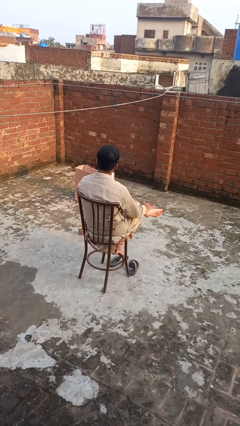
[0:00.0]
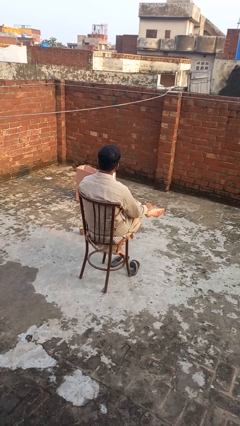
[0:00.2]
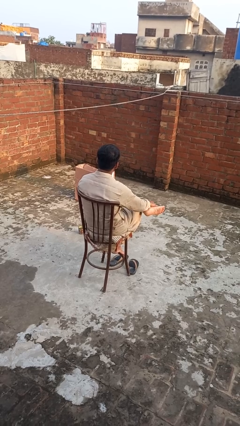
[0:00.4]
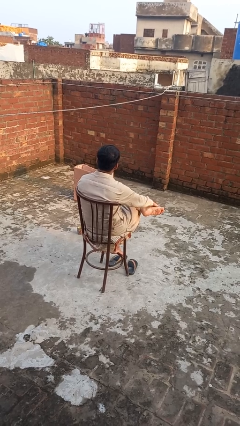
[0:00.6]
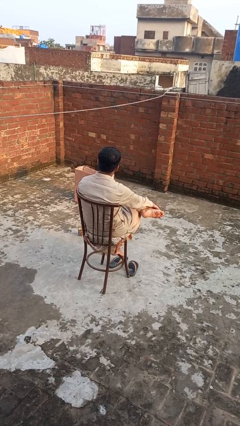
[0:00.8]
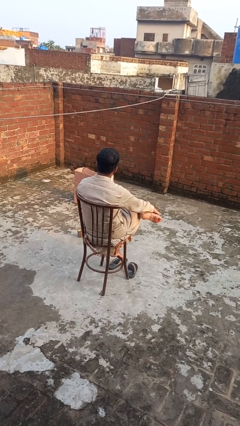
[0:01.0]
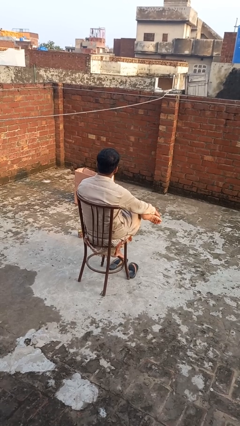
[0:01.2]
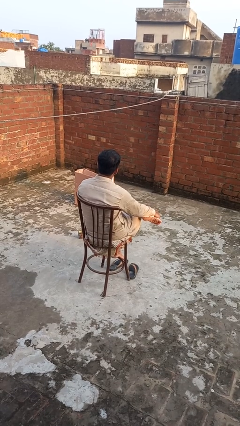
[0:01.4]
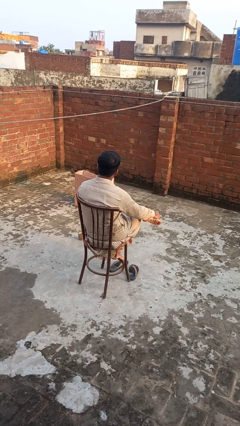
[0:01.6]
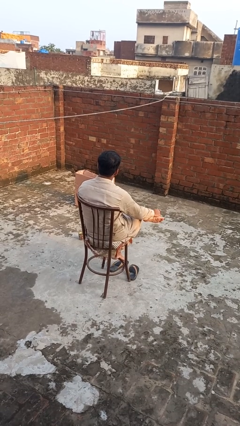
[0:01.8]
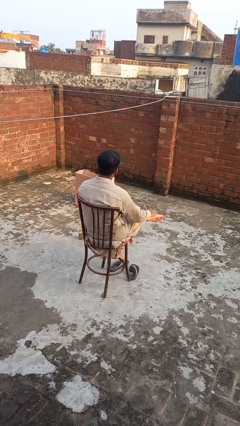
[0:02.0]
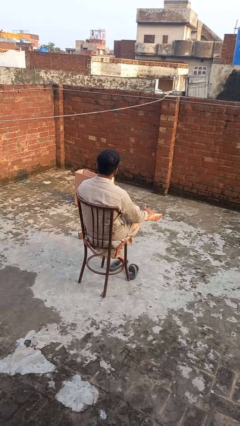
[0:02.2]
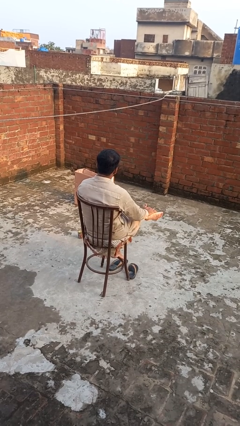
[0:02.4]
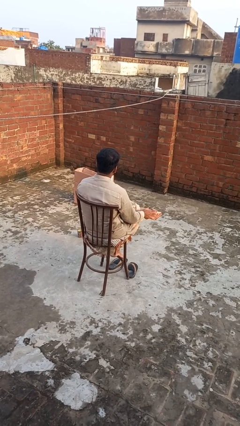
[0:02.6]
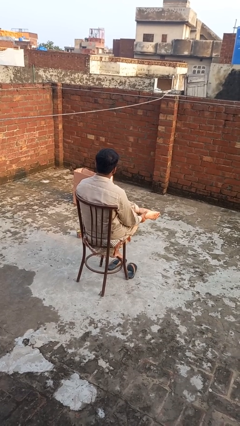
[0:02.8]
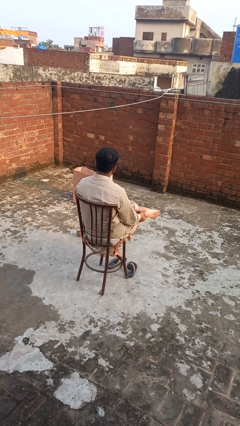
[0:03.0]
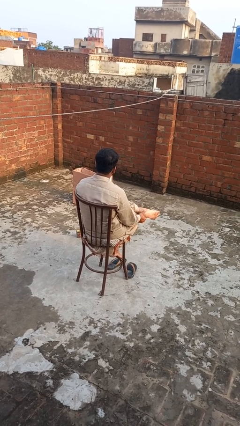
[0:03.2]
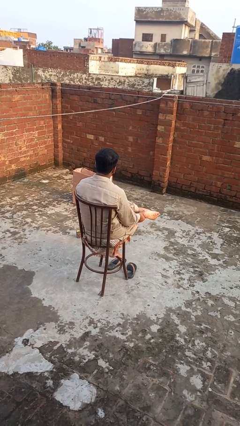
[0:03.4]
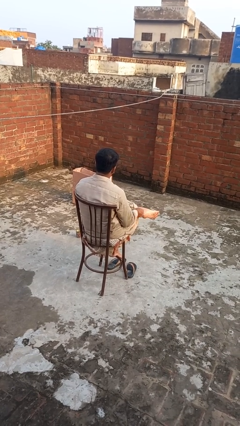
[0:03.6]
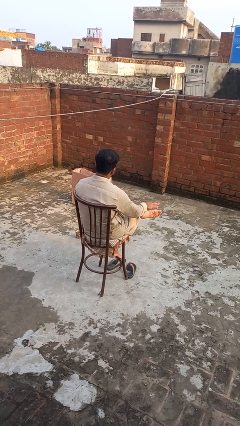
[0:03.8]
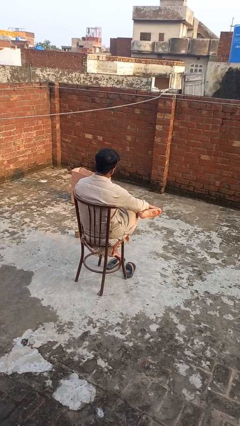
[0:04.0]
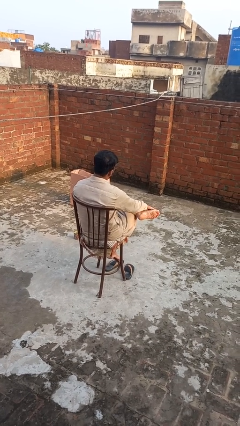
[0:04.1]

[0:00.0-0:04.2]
person rubs foot

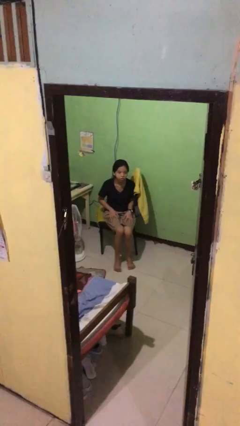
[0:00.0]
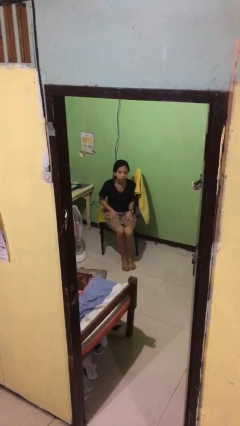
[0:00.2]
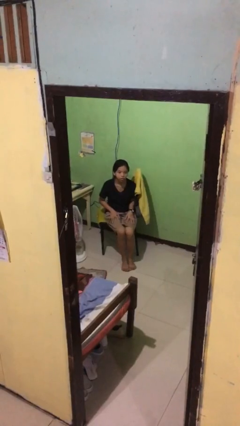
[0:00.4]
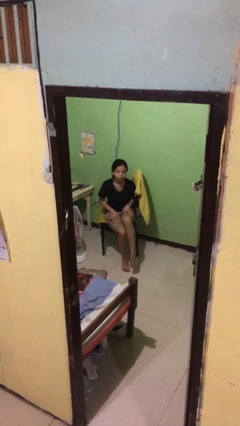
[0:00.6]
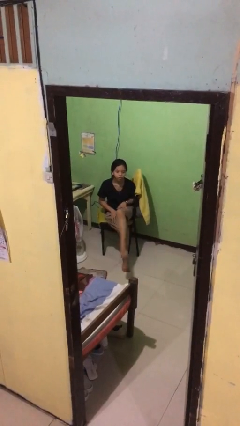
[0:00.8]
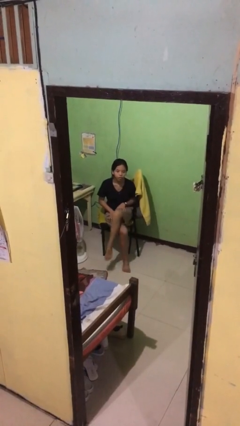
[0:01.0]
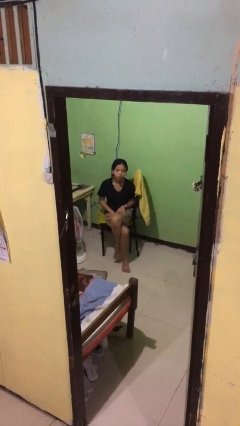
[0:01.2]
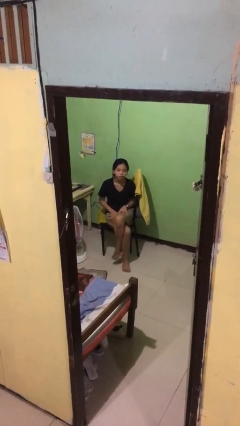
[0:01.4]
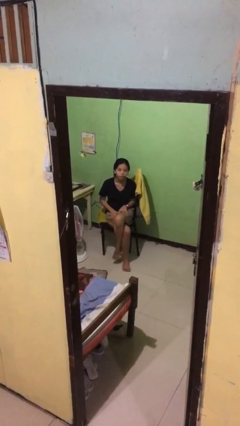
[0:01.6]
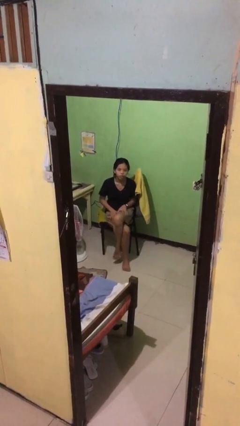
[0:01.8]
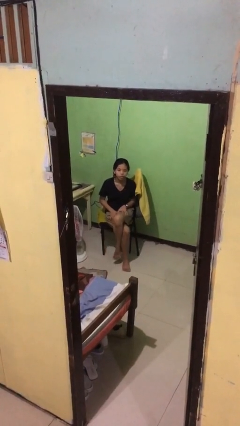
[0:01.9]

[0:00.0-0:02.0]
person crosses legs

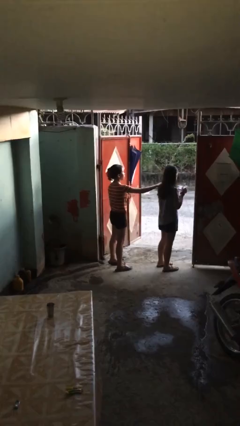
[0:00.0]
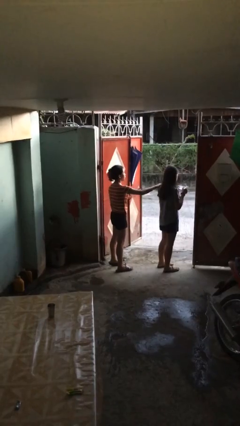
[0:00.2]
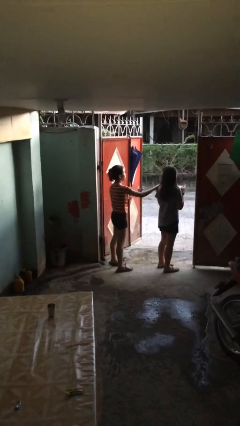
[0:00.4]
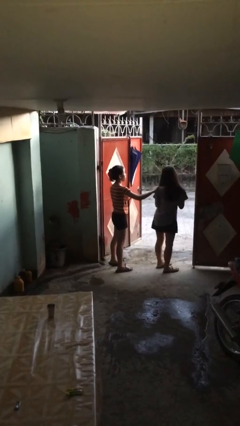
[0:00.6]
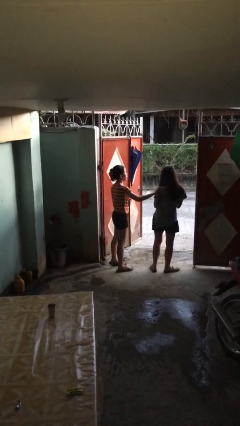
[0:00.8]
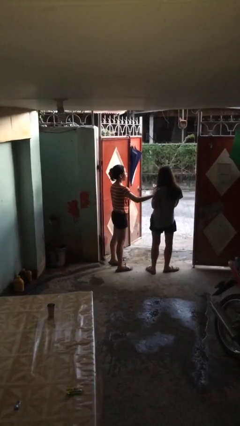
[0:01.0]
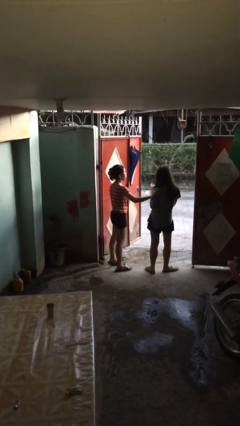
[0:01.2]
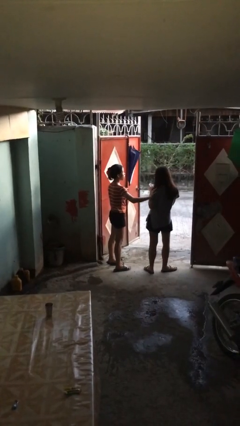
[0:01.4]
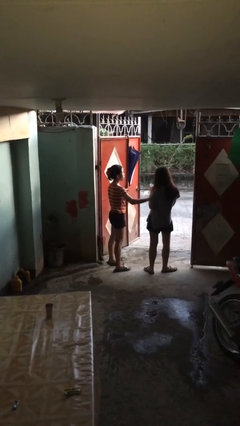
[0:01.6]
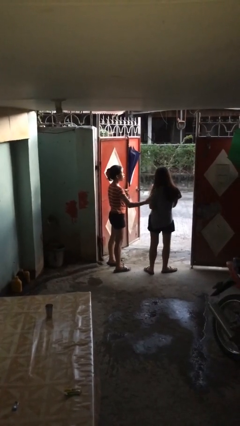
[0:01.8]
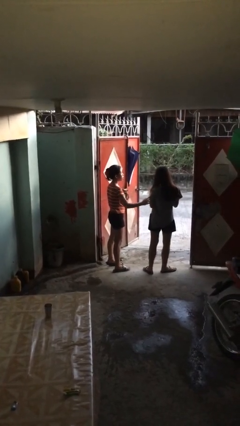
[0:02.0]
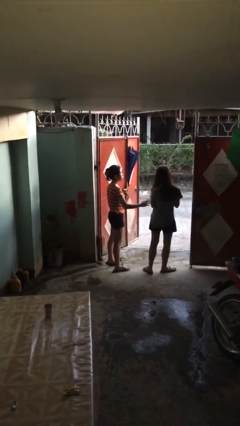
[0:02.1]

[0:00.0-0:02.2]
person spins person around

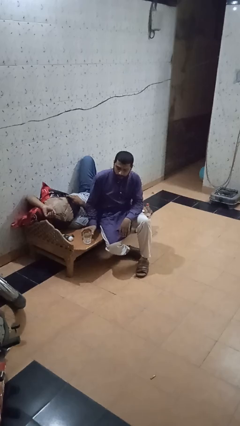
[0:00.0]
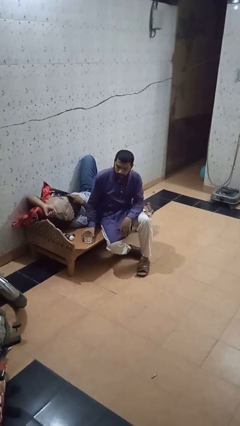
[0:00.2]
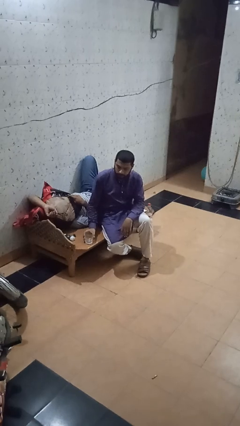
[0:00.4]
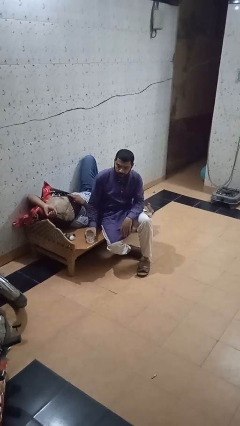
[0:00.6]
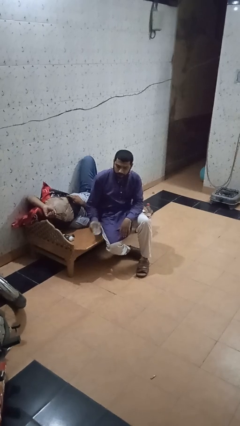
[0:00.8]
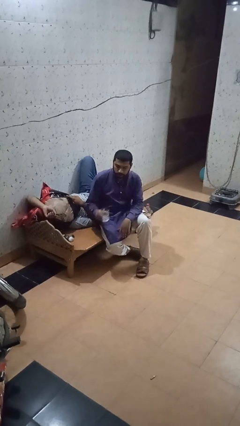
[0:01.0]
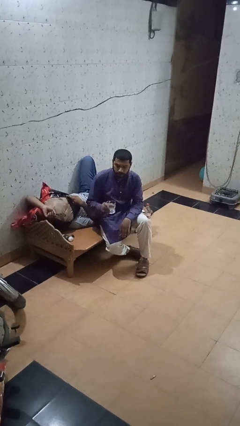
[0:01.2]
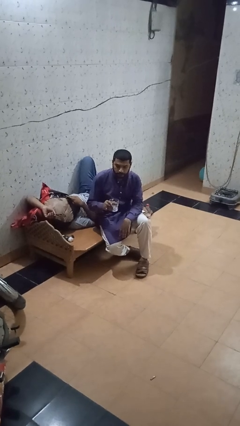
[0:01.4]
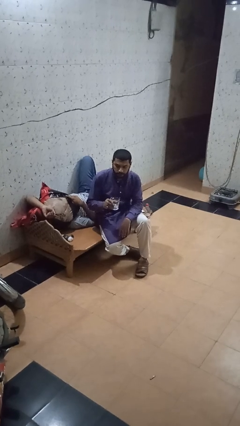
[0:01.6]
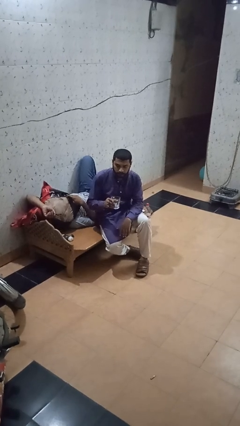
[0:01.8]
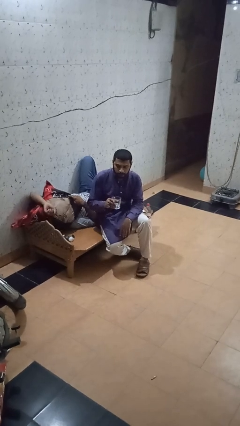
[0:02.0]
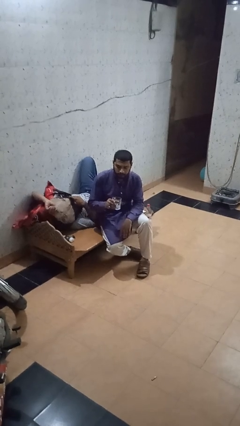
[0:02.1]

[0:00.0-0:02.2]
person picks up object from table

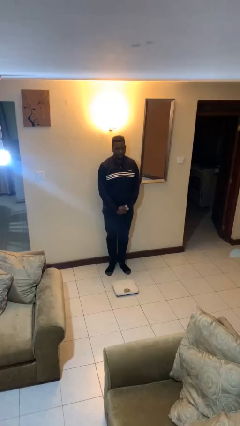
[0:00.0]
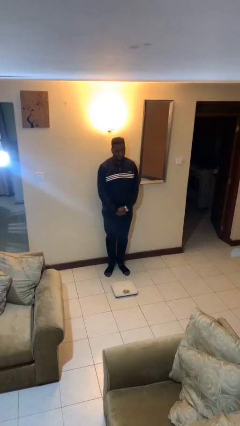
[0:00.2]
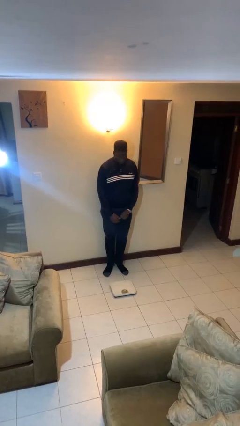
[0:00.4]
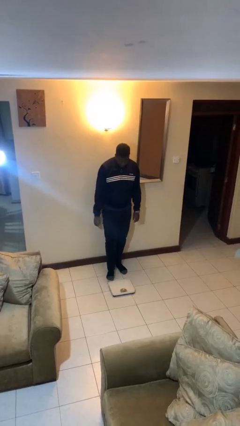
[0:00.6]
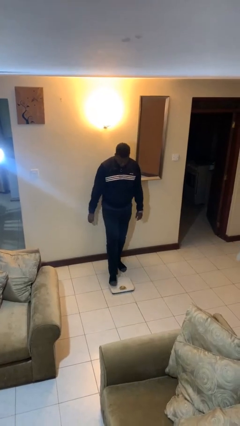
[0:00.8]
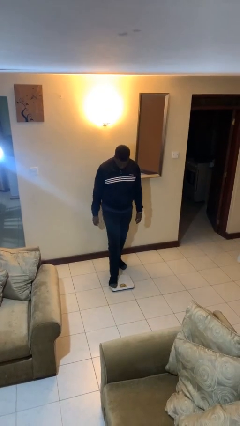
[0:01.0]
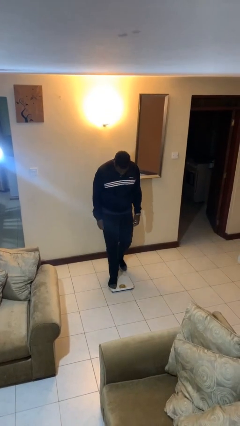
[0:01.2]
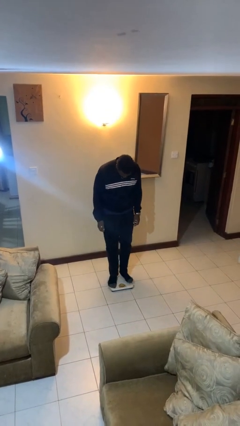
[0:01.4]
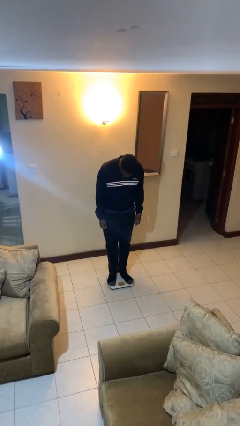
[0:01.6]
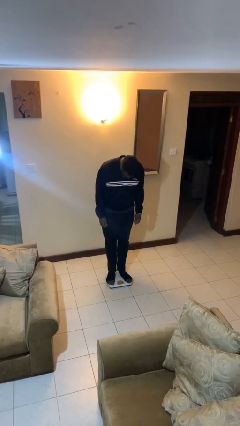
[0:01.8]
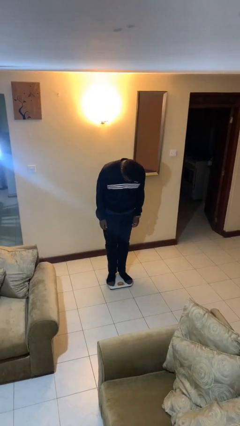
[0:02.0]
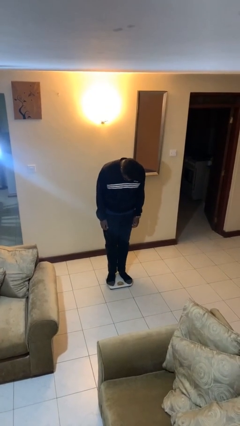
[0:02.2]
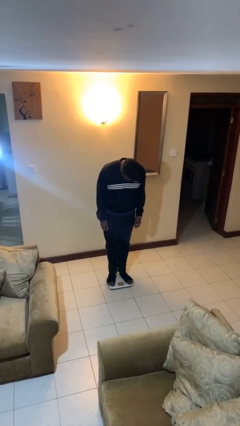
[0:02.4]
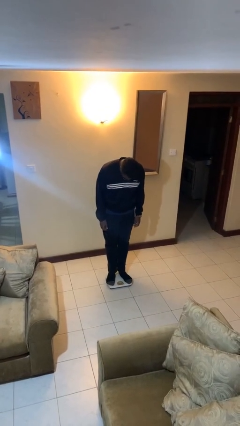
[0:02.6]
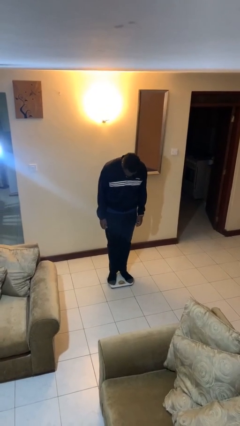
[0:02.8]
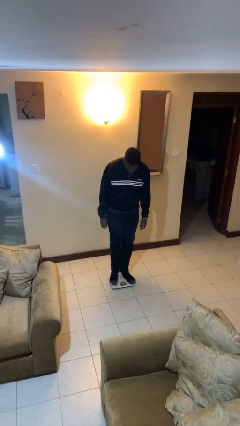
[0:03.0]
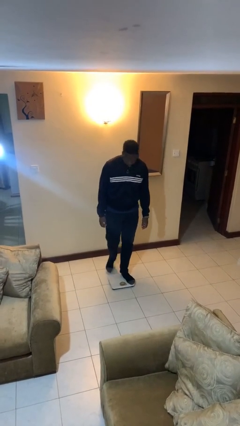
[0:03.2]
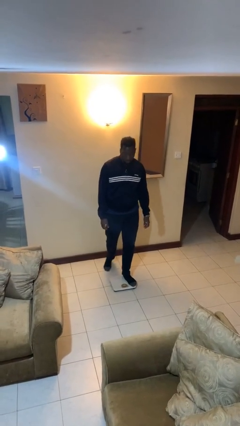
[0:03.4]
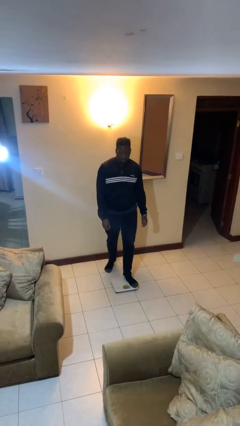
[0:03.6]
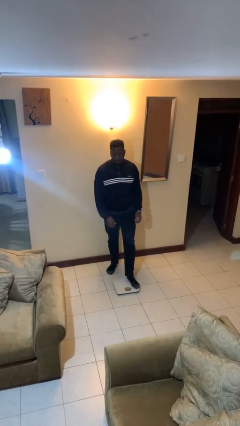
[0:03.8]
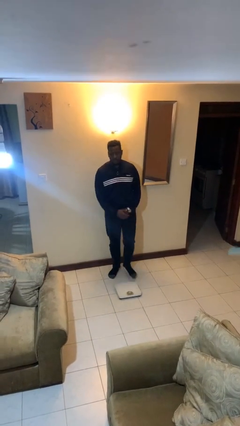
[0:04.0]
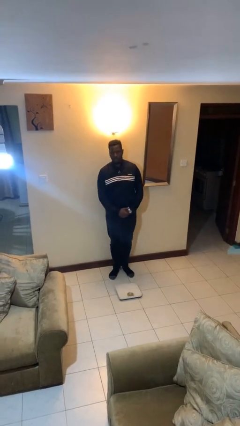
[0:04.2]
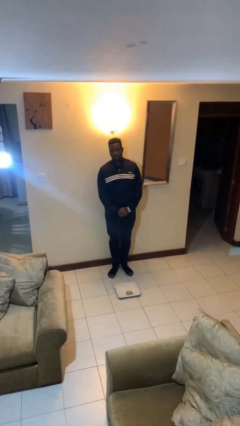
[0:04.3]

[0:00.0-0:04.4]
person uses bodyweight scale

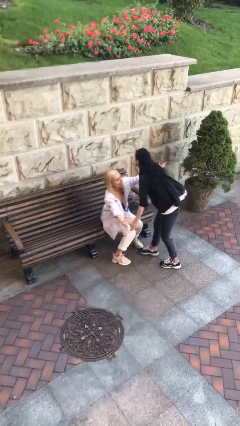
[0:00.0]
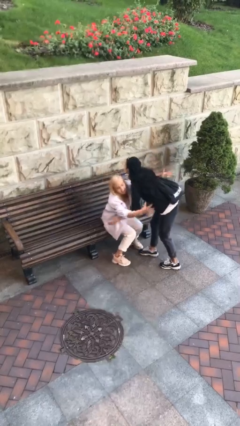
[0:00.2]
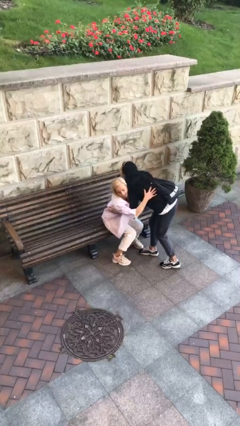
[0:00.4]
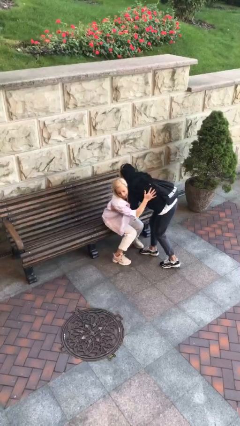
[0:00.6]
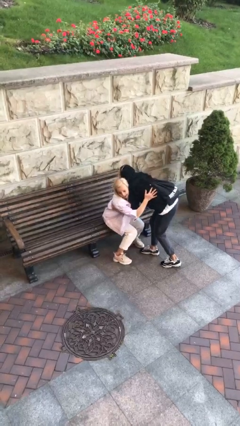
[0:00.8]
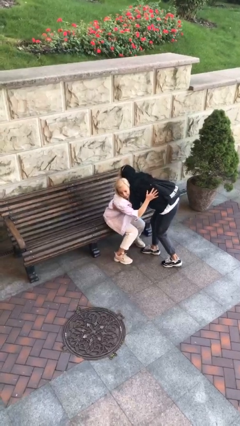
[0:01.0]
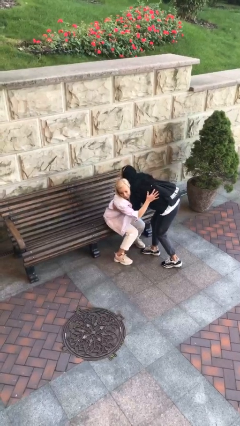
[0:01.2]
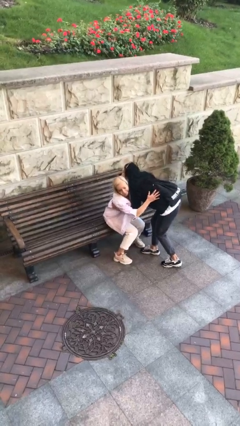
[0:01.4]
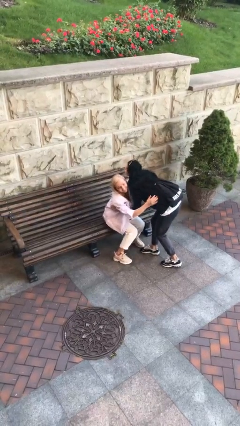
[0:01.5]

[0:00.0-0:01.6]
person embraces person

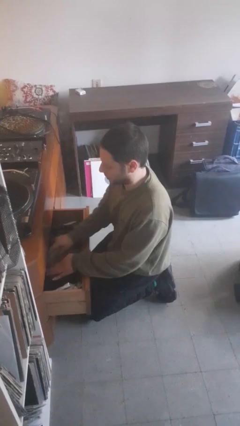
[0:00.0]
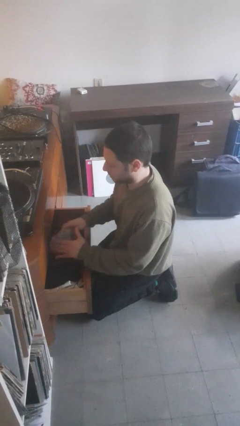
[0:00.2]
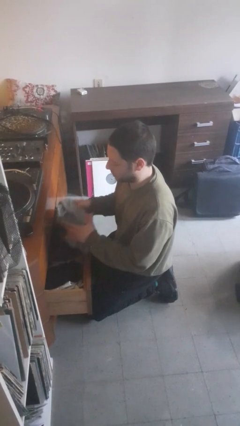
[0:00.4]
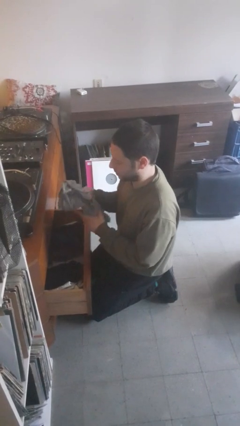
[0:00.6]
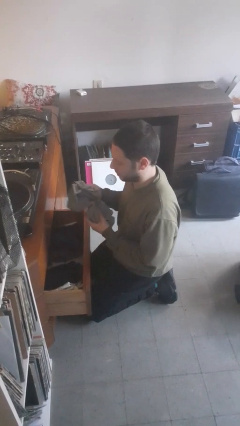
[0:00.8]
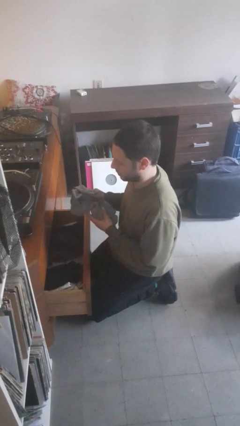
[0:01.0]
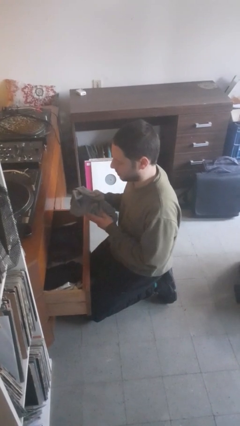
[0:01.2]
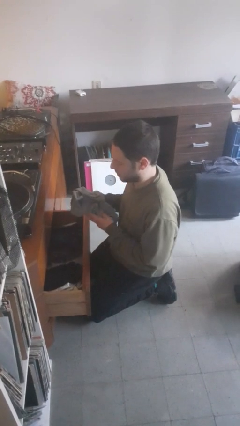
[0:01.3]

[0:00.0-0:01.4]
person takes clothes from dresser
